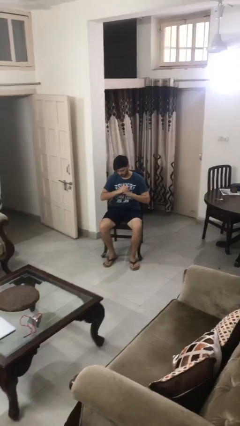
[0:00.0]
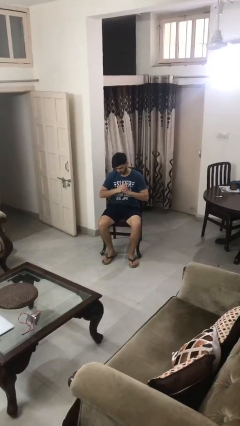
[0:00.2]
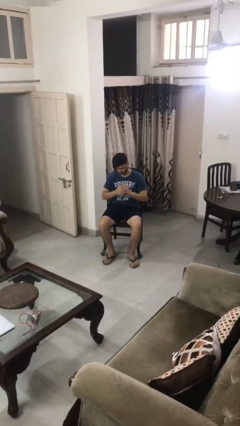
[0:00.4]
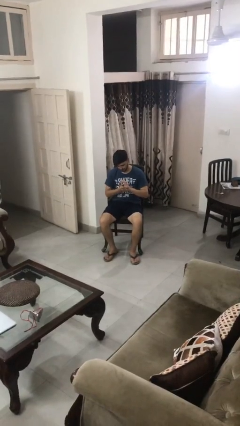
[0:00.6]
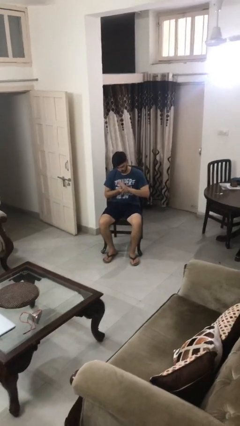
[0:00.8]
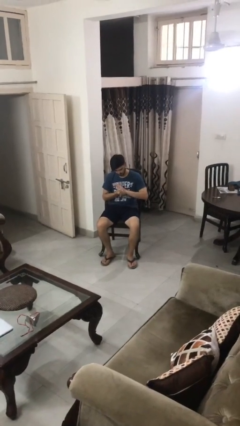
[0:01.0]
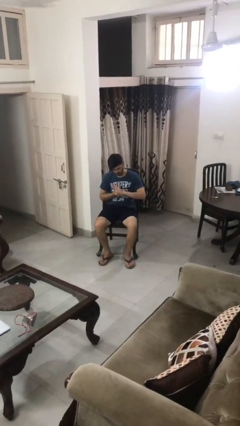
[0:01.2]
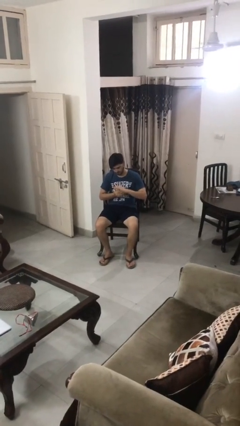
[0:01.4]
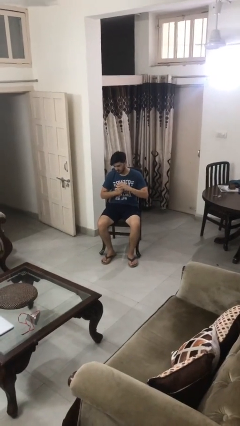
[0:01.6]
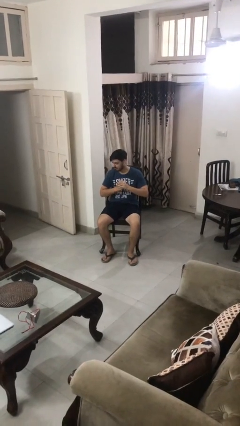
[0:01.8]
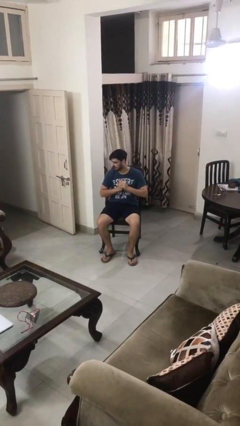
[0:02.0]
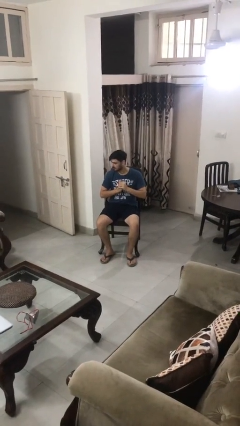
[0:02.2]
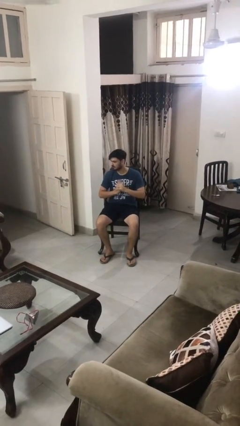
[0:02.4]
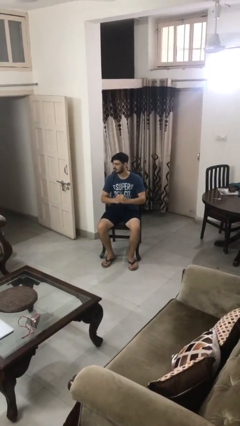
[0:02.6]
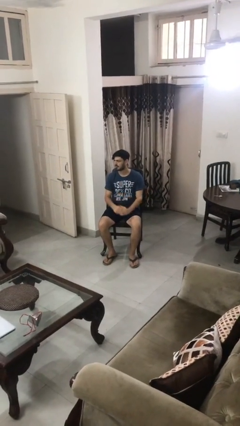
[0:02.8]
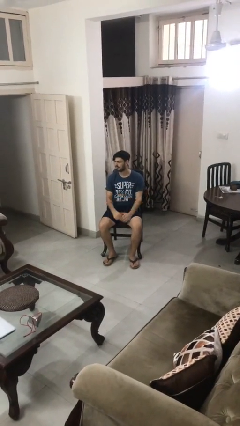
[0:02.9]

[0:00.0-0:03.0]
person cracks knuckles

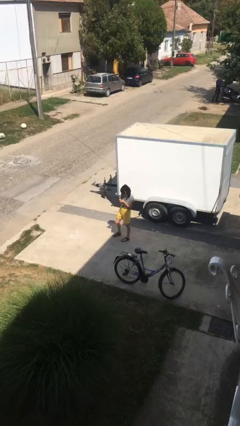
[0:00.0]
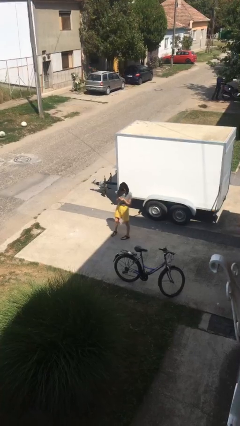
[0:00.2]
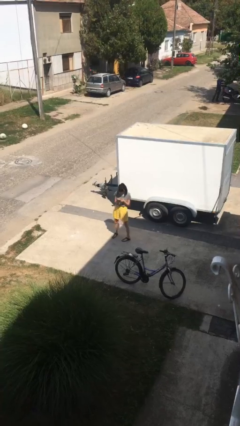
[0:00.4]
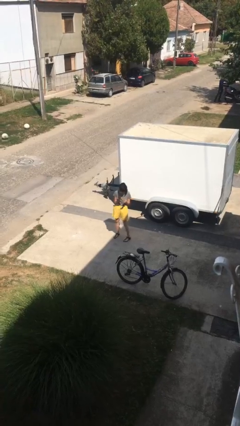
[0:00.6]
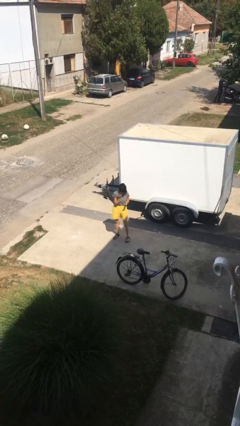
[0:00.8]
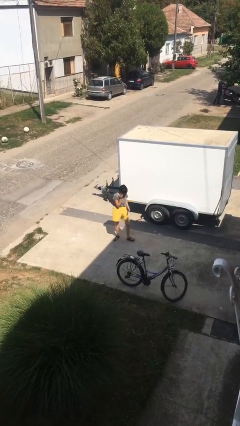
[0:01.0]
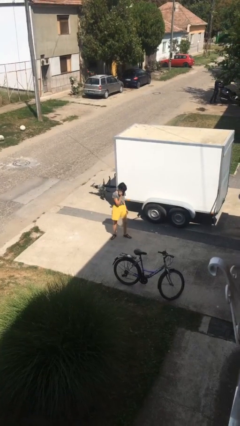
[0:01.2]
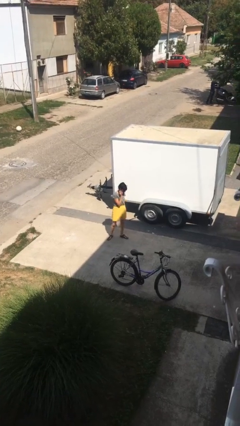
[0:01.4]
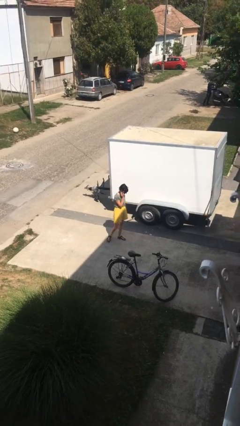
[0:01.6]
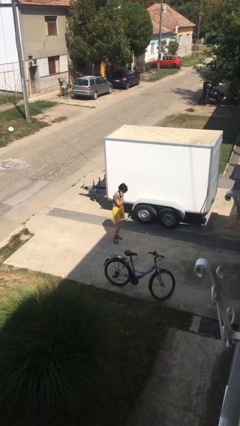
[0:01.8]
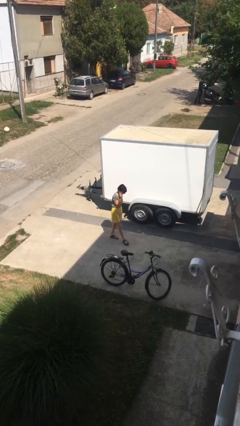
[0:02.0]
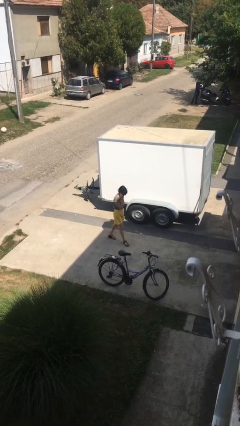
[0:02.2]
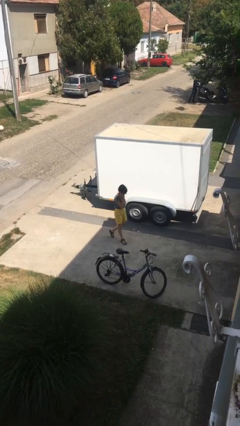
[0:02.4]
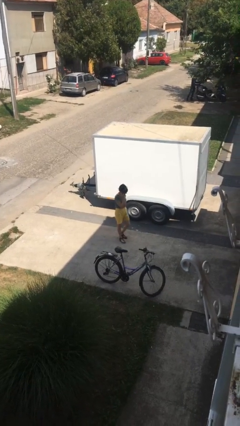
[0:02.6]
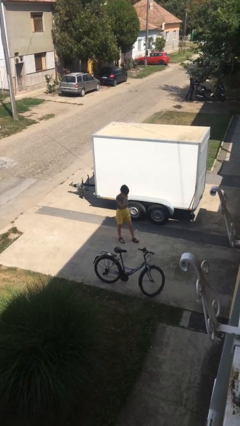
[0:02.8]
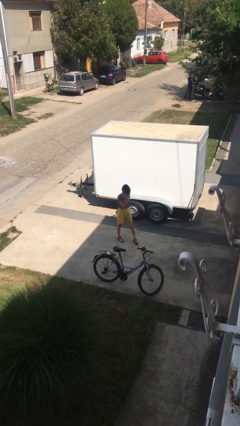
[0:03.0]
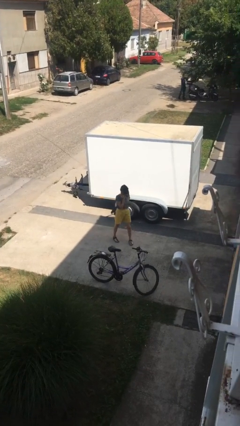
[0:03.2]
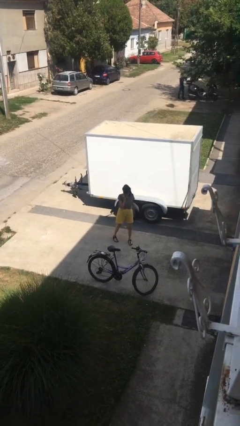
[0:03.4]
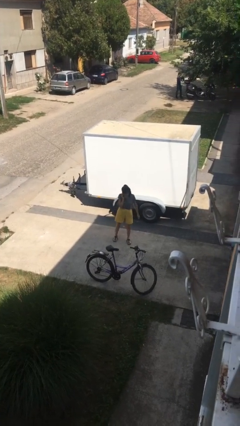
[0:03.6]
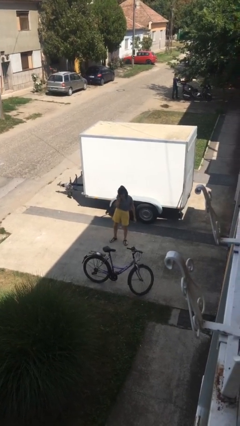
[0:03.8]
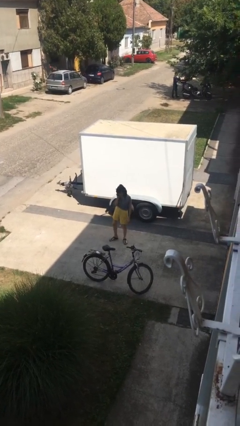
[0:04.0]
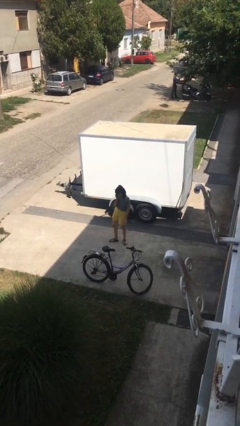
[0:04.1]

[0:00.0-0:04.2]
person talks on phone

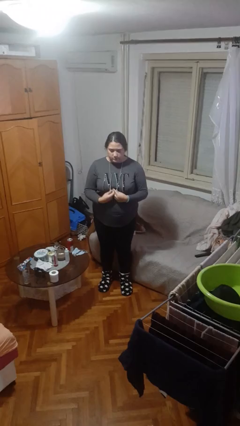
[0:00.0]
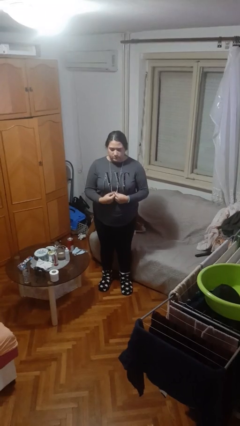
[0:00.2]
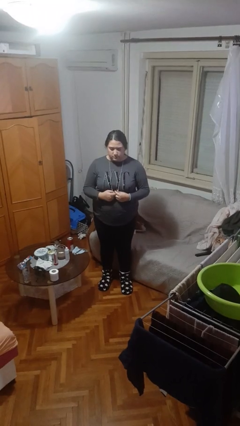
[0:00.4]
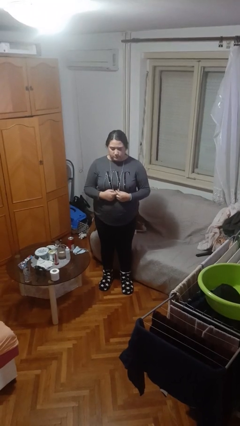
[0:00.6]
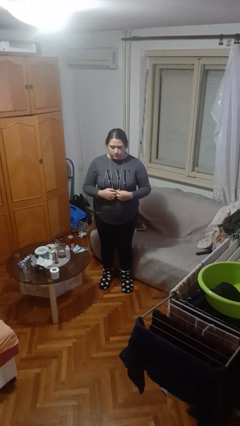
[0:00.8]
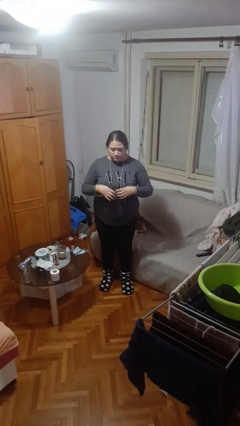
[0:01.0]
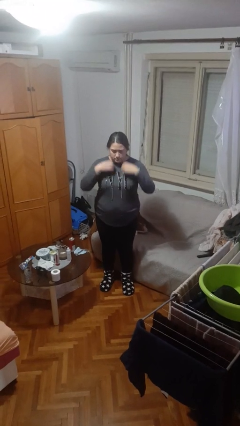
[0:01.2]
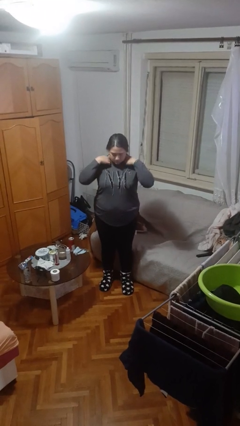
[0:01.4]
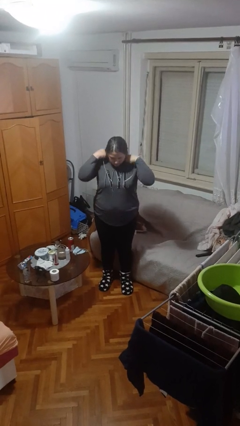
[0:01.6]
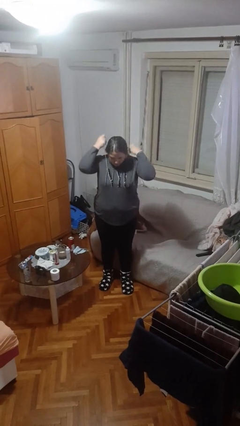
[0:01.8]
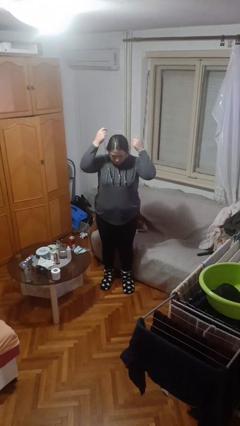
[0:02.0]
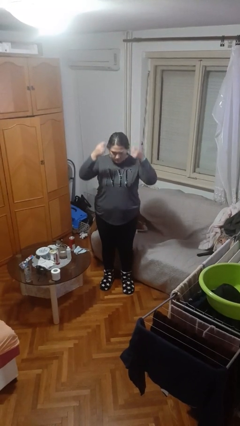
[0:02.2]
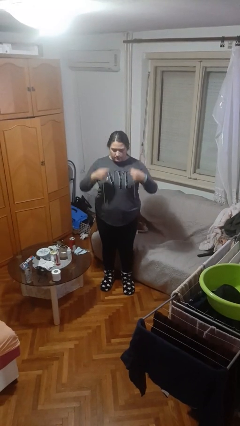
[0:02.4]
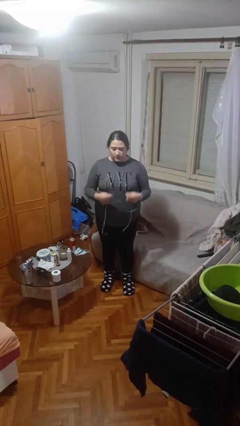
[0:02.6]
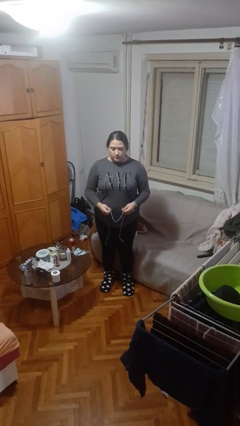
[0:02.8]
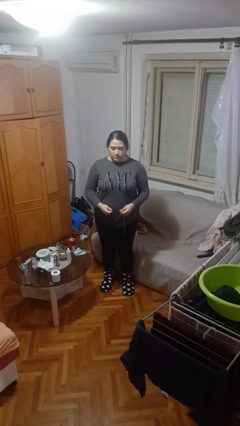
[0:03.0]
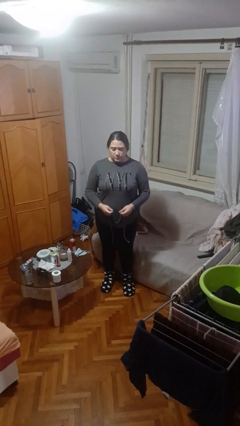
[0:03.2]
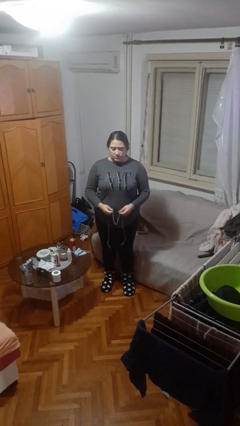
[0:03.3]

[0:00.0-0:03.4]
person takes off necklace

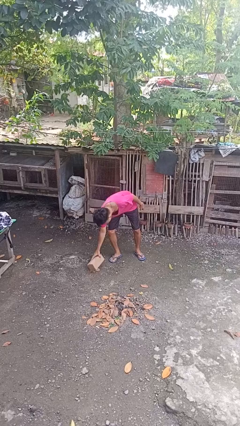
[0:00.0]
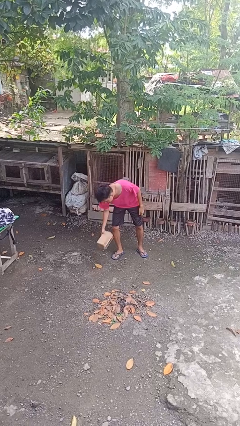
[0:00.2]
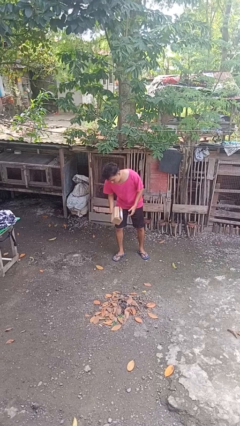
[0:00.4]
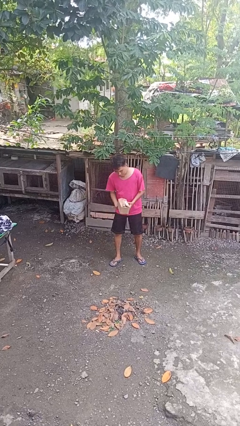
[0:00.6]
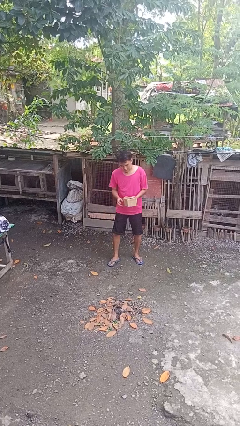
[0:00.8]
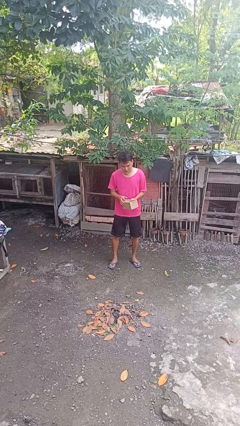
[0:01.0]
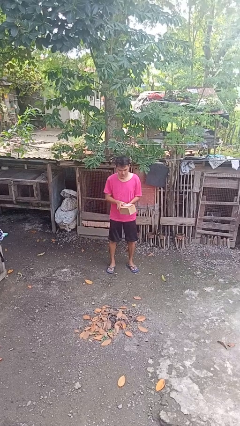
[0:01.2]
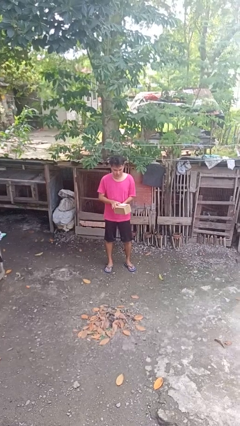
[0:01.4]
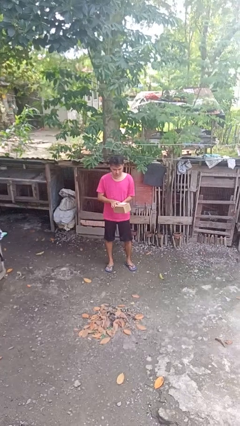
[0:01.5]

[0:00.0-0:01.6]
person picks up object from floor

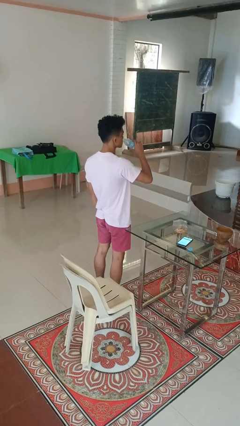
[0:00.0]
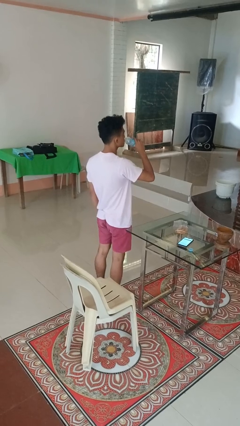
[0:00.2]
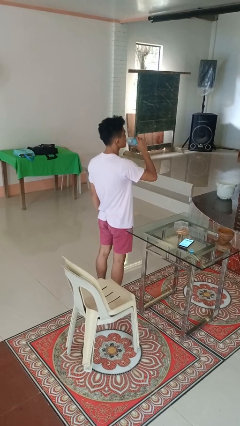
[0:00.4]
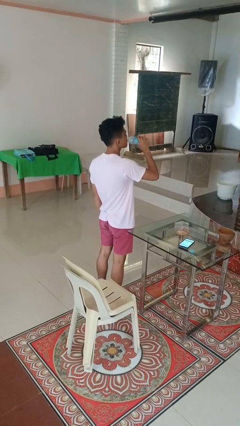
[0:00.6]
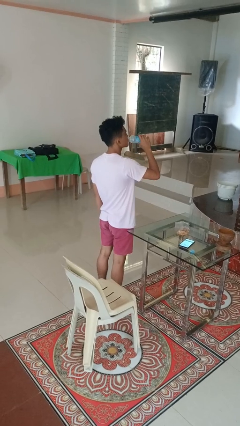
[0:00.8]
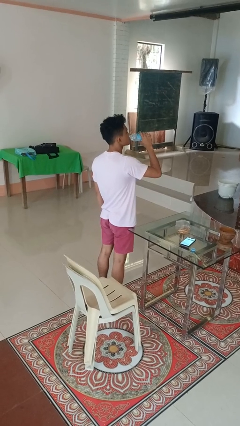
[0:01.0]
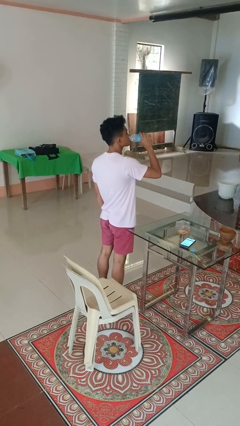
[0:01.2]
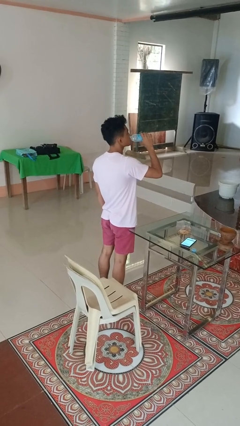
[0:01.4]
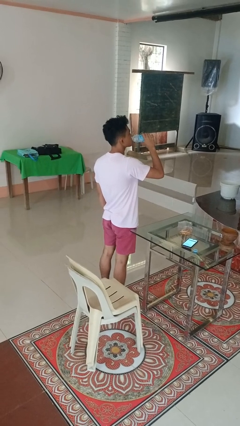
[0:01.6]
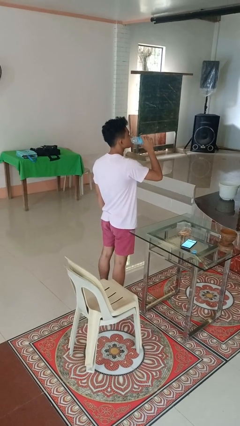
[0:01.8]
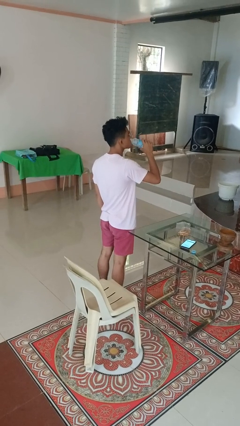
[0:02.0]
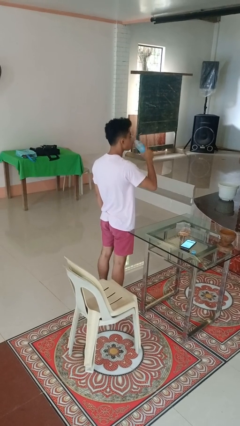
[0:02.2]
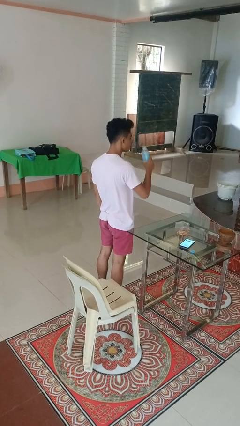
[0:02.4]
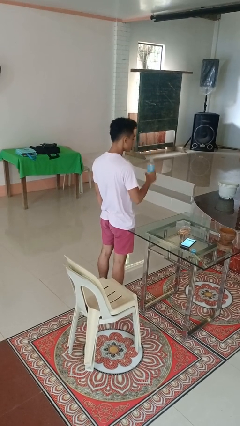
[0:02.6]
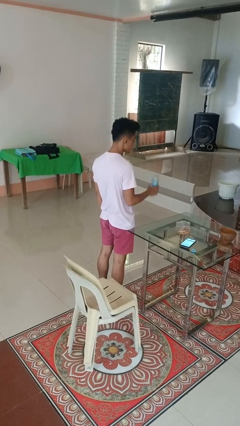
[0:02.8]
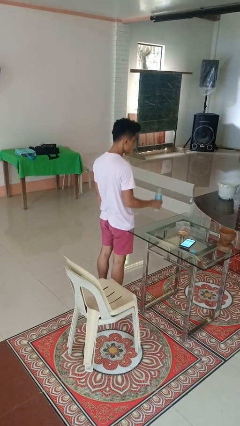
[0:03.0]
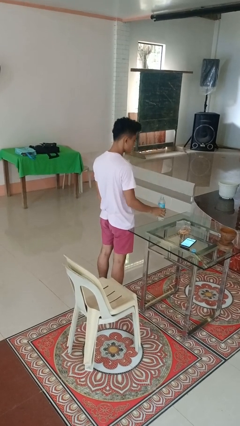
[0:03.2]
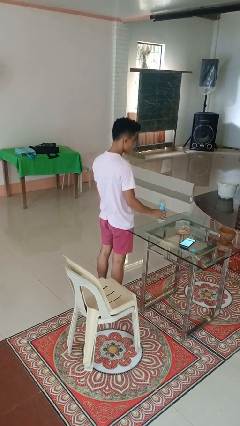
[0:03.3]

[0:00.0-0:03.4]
person drinks from bottle

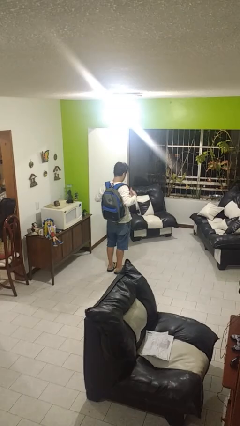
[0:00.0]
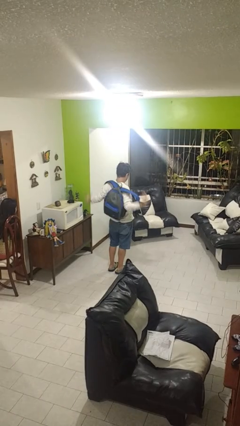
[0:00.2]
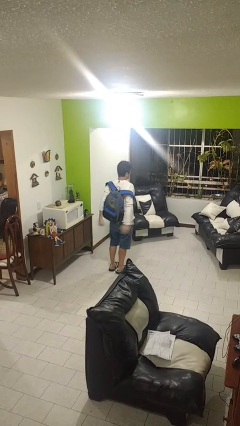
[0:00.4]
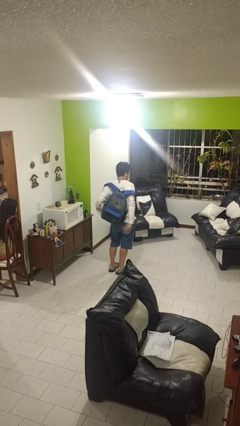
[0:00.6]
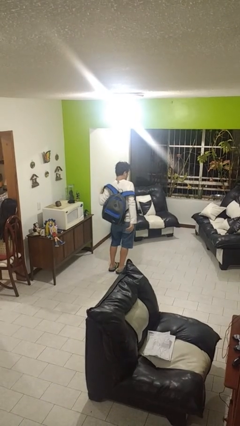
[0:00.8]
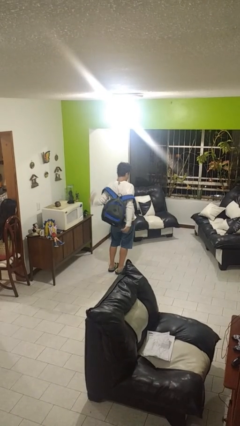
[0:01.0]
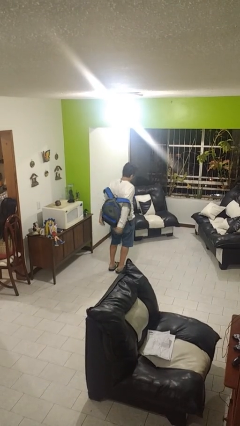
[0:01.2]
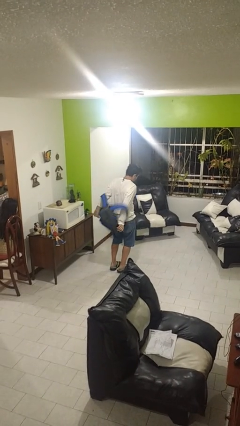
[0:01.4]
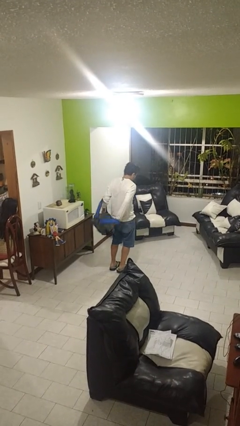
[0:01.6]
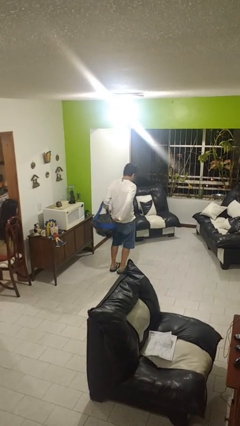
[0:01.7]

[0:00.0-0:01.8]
person takes off backpack
